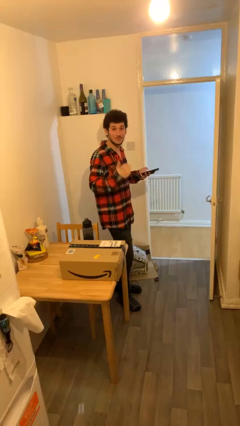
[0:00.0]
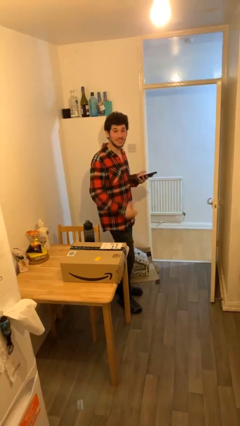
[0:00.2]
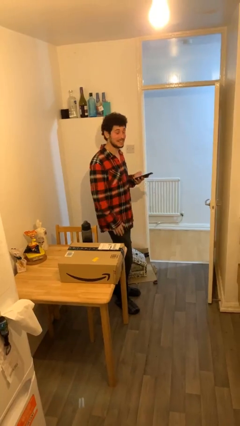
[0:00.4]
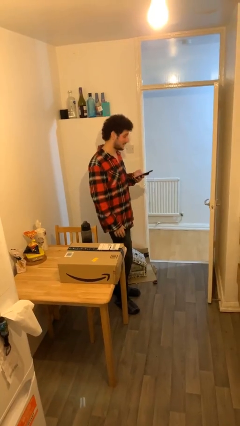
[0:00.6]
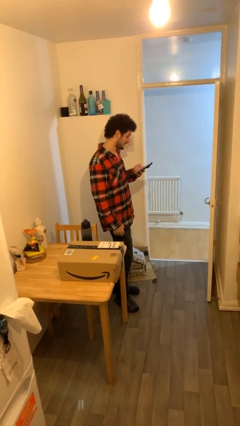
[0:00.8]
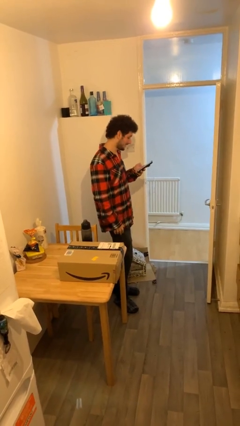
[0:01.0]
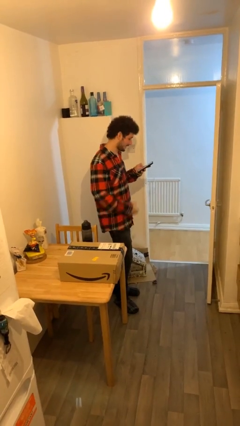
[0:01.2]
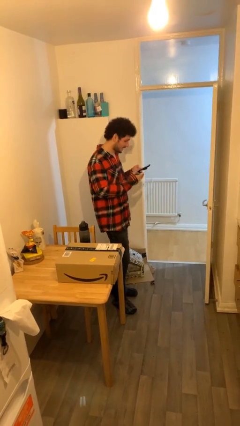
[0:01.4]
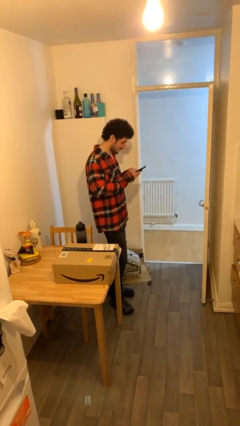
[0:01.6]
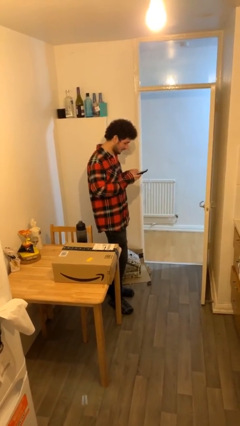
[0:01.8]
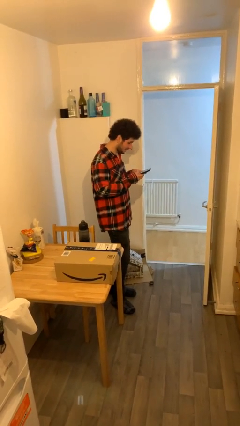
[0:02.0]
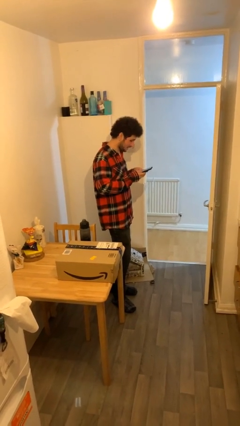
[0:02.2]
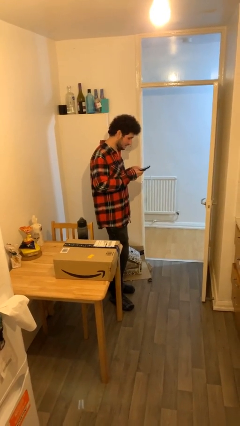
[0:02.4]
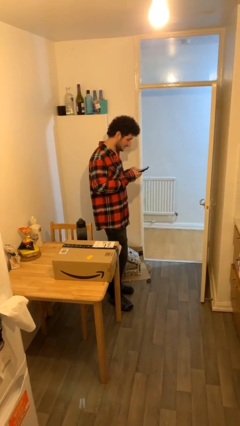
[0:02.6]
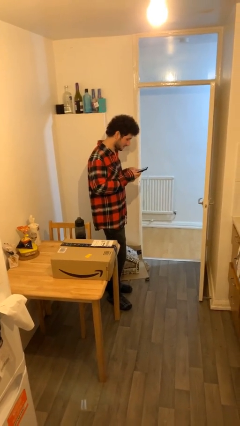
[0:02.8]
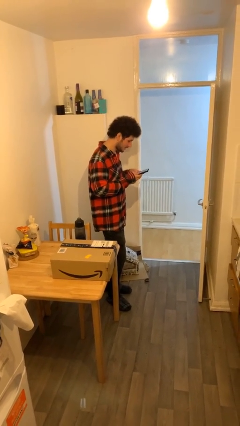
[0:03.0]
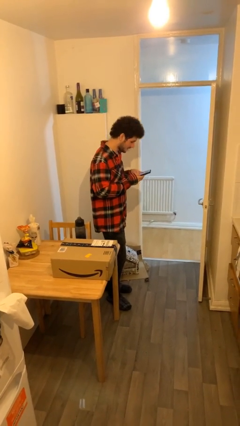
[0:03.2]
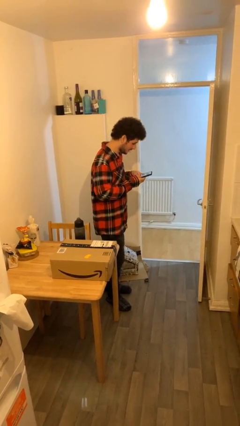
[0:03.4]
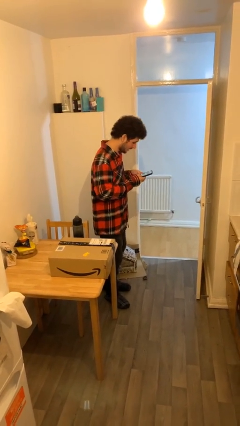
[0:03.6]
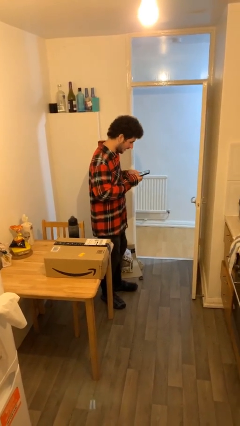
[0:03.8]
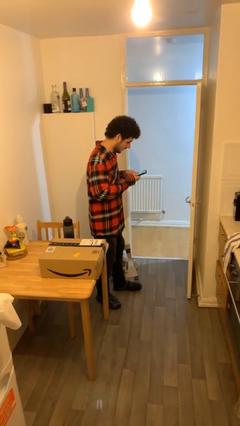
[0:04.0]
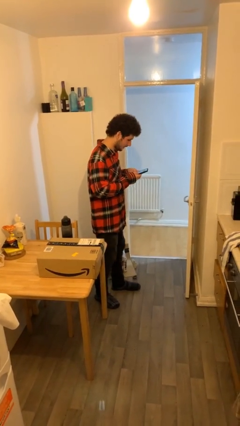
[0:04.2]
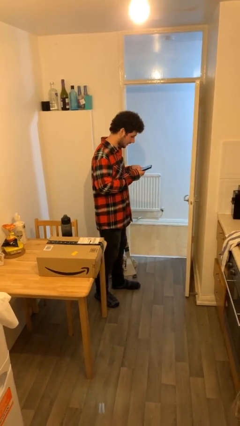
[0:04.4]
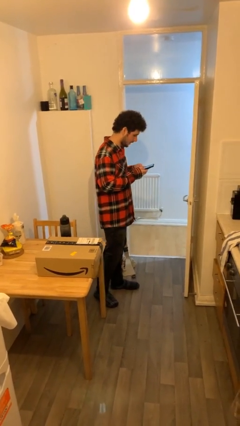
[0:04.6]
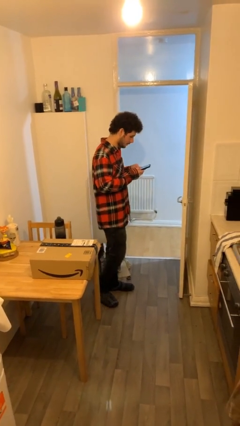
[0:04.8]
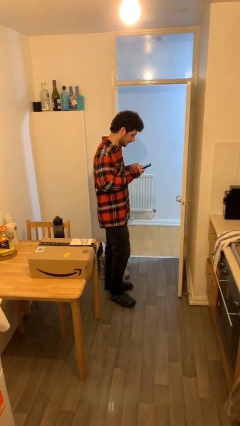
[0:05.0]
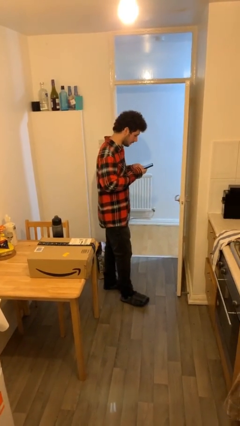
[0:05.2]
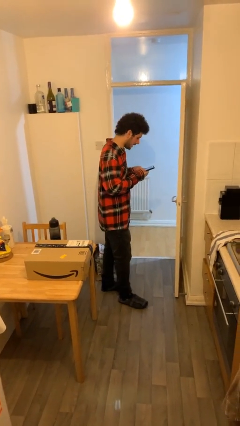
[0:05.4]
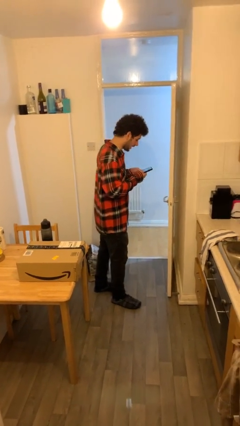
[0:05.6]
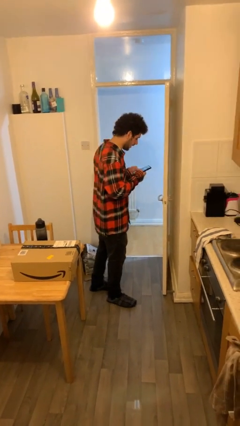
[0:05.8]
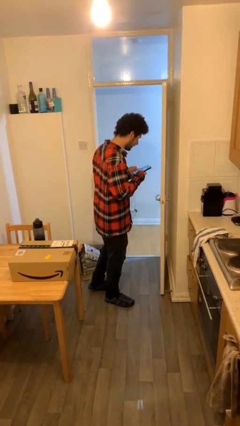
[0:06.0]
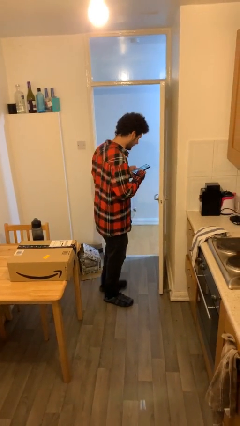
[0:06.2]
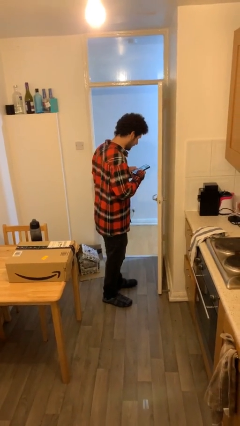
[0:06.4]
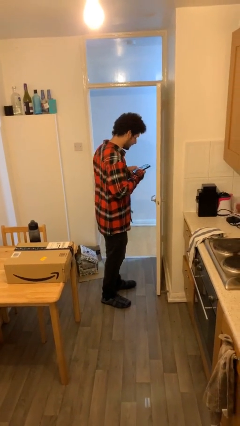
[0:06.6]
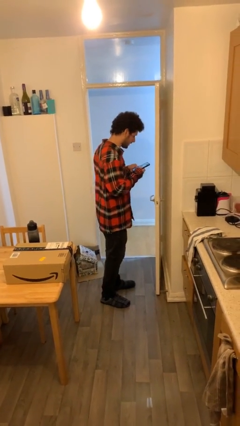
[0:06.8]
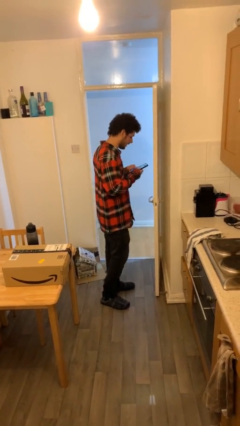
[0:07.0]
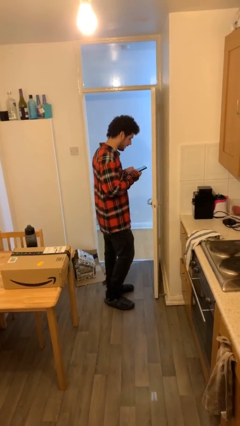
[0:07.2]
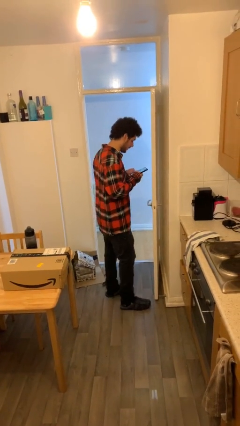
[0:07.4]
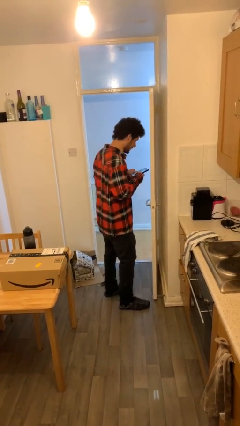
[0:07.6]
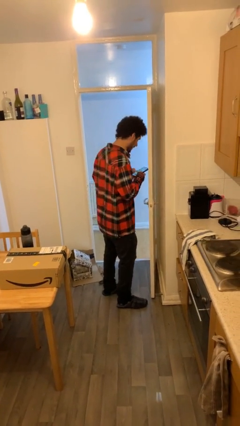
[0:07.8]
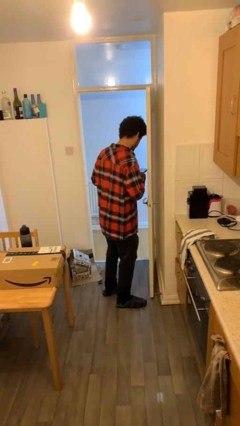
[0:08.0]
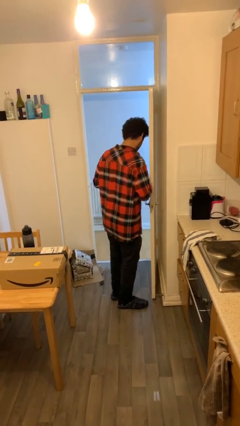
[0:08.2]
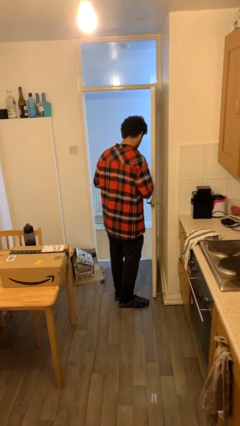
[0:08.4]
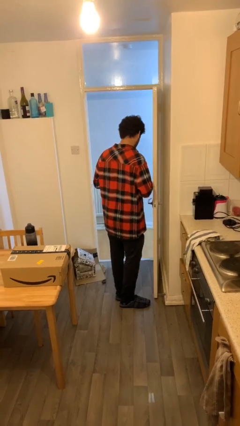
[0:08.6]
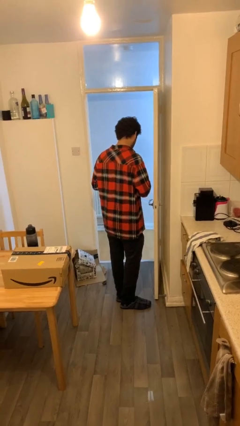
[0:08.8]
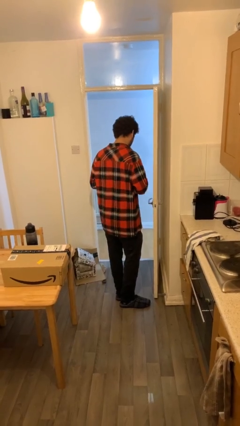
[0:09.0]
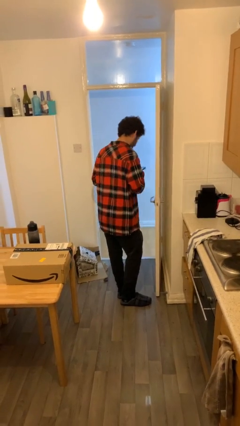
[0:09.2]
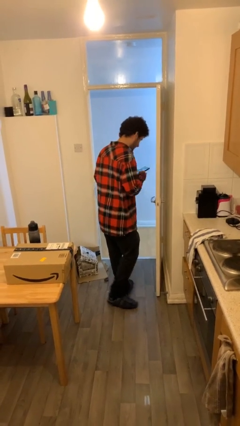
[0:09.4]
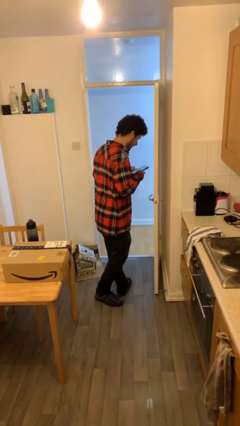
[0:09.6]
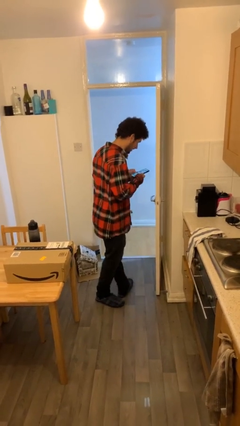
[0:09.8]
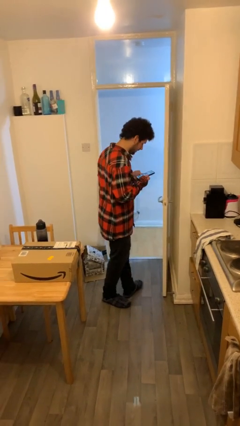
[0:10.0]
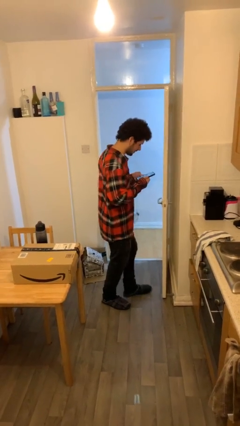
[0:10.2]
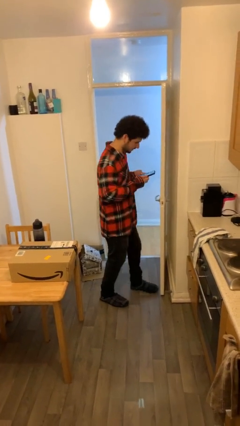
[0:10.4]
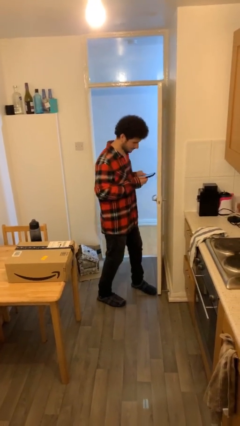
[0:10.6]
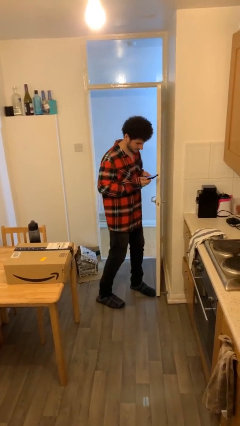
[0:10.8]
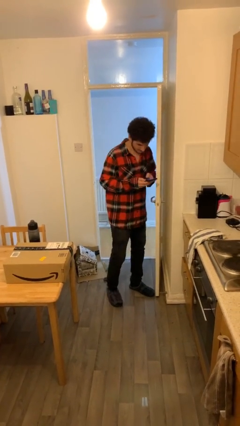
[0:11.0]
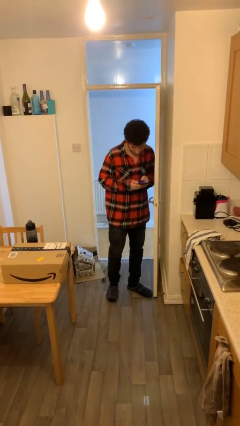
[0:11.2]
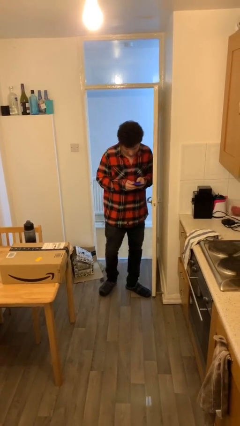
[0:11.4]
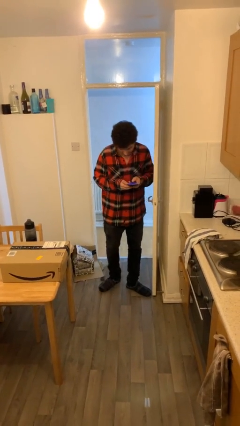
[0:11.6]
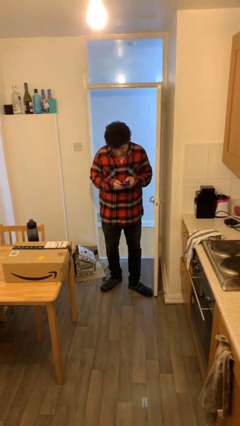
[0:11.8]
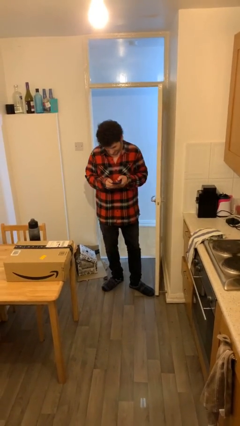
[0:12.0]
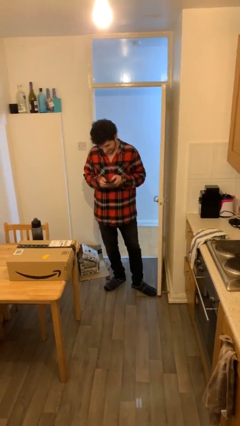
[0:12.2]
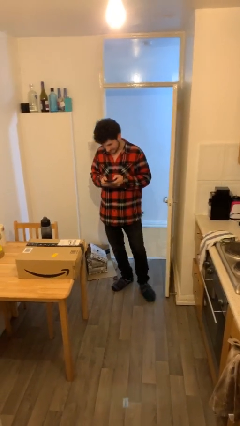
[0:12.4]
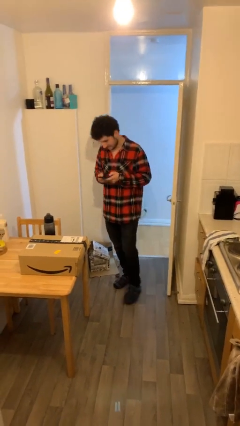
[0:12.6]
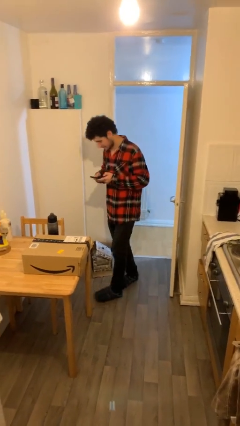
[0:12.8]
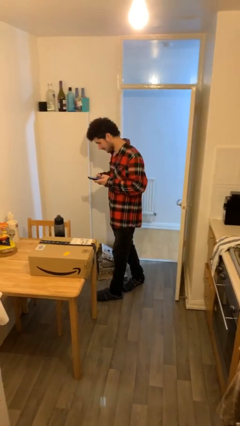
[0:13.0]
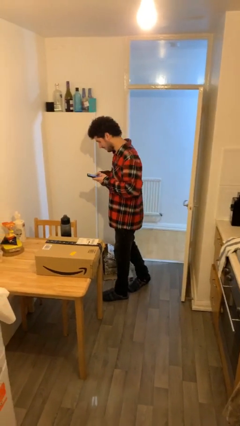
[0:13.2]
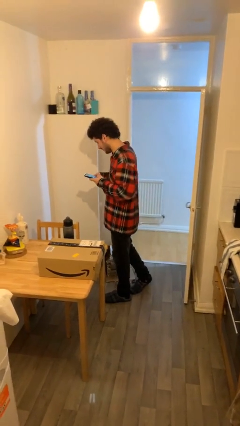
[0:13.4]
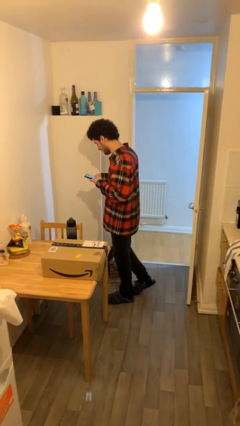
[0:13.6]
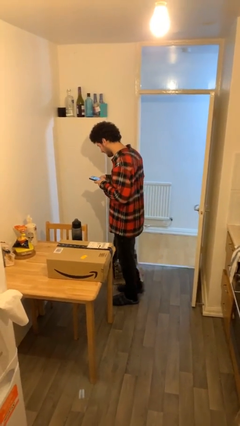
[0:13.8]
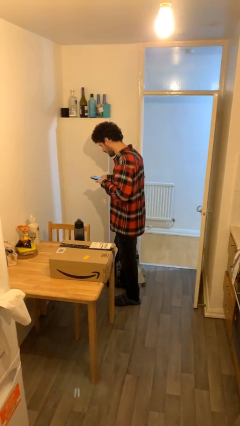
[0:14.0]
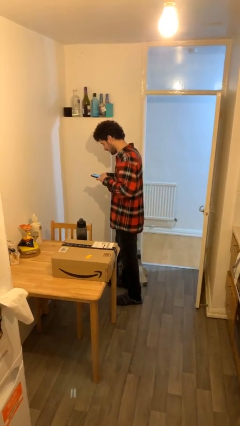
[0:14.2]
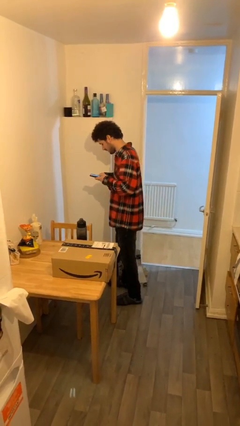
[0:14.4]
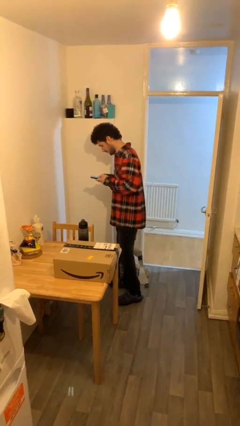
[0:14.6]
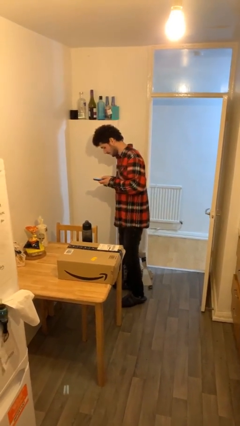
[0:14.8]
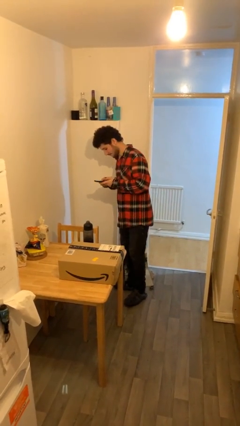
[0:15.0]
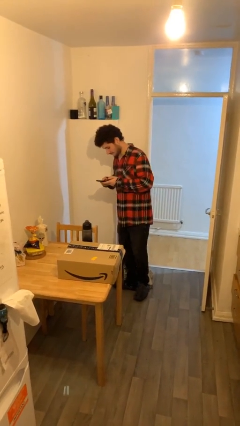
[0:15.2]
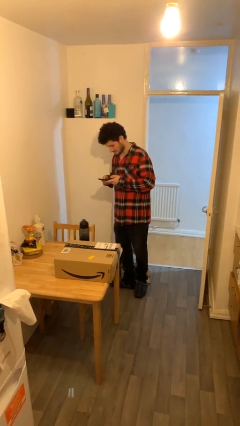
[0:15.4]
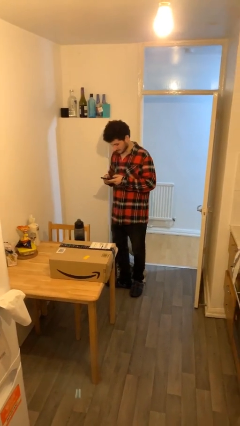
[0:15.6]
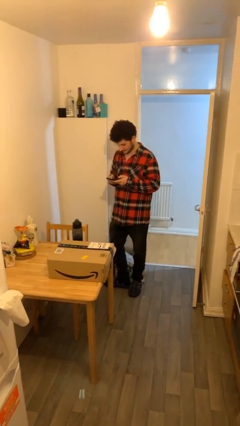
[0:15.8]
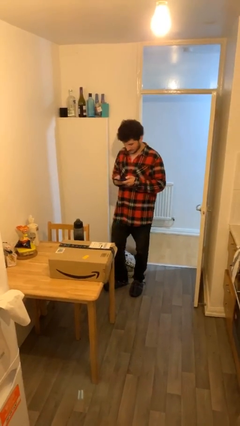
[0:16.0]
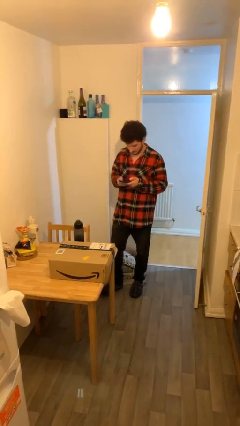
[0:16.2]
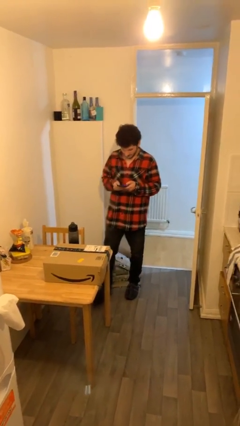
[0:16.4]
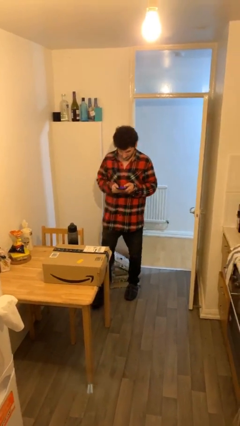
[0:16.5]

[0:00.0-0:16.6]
person texts on phone

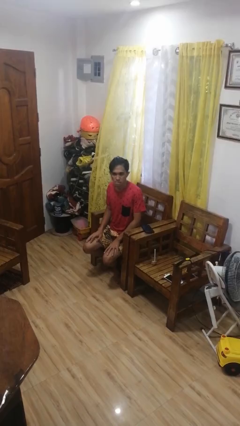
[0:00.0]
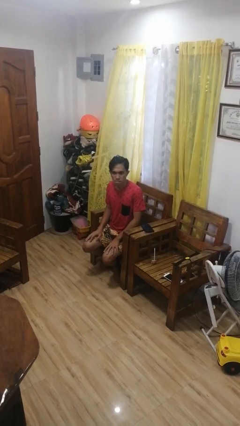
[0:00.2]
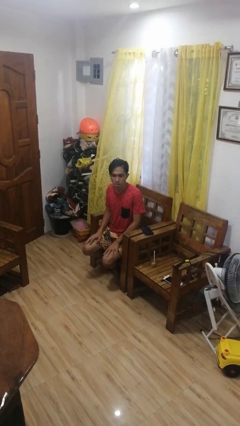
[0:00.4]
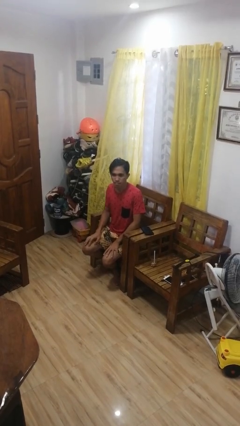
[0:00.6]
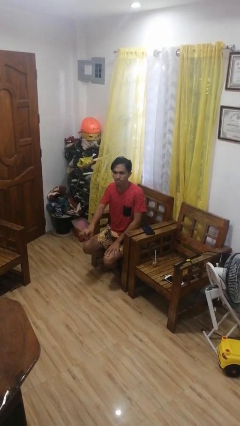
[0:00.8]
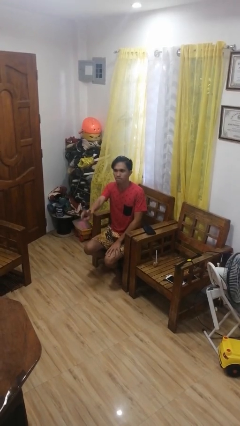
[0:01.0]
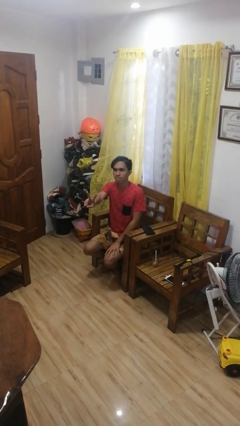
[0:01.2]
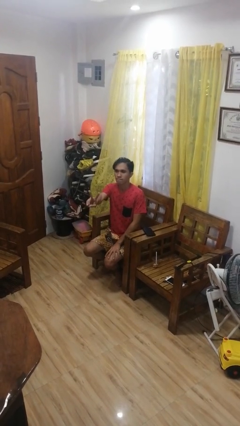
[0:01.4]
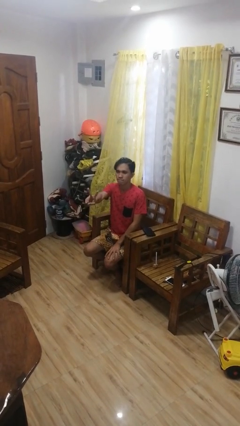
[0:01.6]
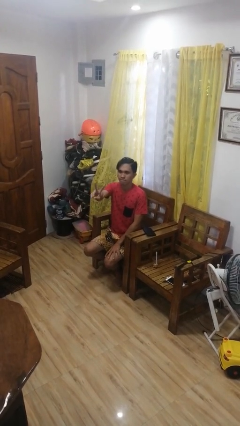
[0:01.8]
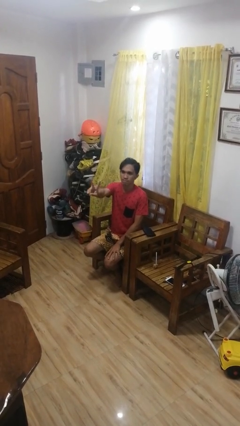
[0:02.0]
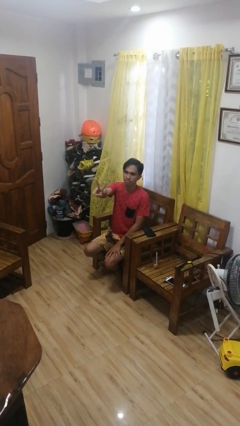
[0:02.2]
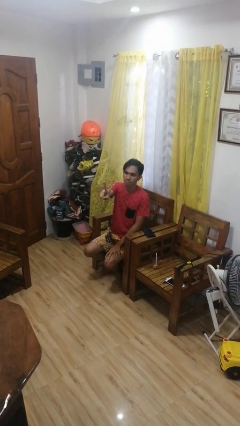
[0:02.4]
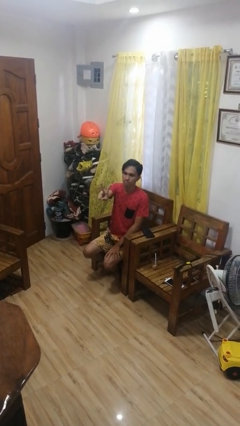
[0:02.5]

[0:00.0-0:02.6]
person gestures peace
